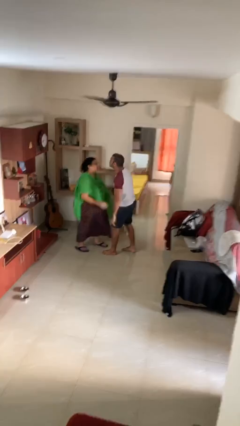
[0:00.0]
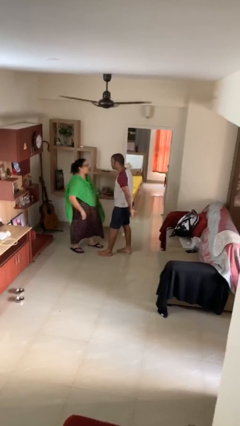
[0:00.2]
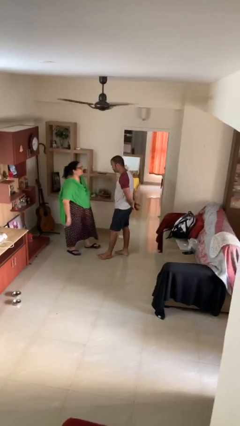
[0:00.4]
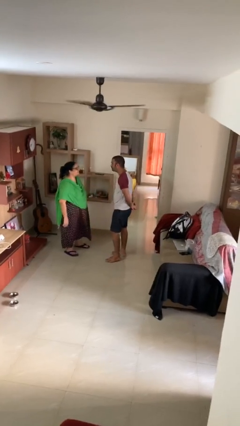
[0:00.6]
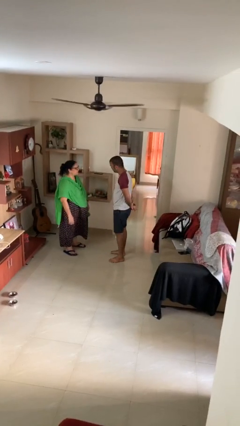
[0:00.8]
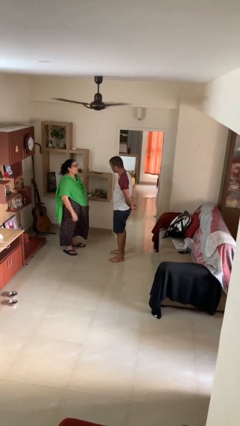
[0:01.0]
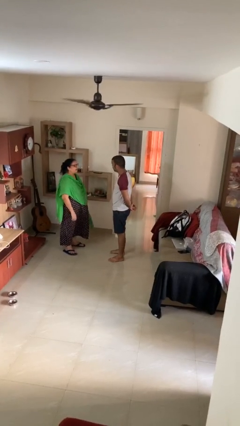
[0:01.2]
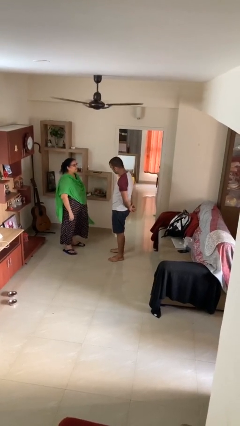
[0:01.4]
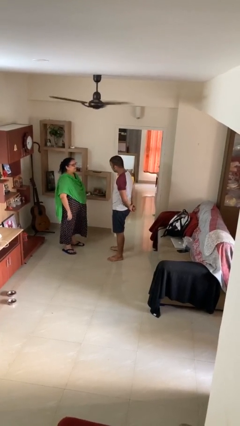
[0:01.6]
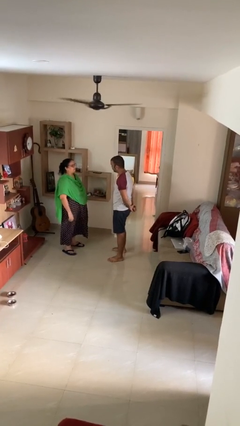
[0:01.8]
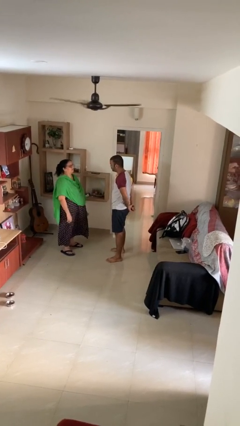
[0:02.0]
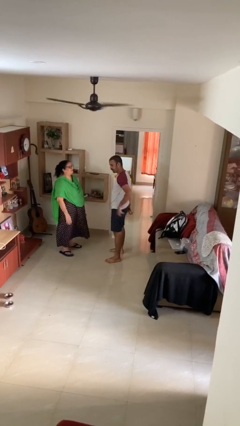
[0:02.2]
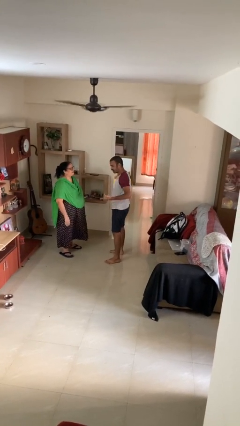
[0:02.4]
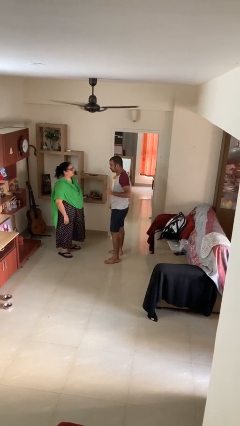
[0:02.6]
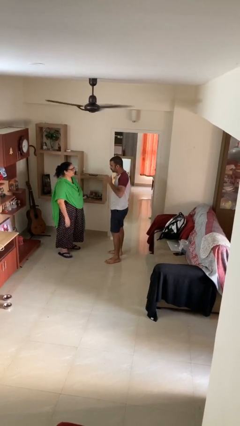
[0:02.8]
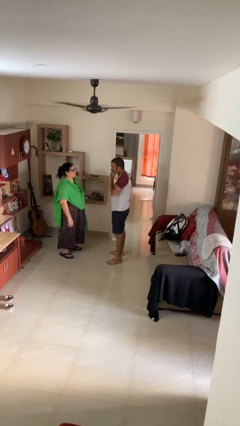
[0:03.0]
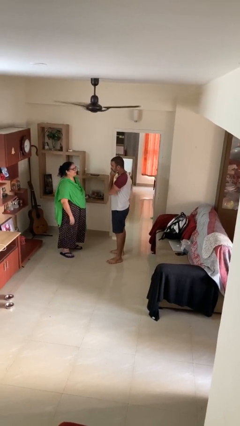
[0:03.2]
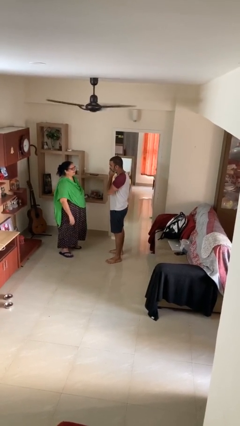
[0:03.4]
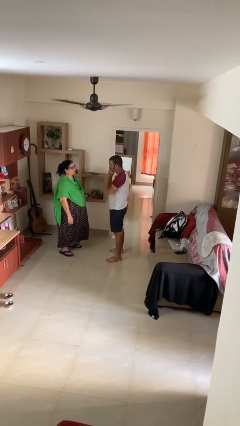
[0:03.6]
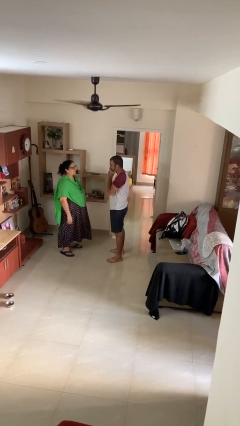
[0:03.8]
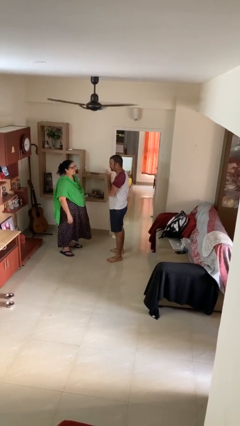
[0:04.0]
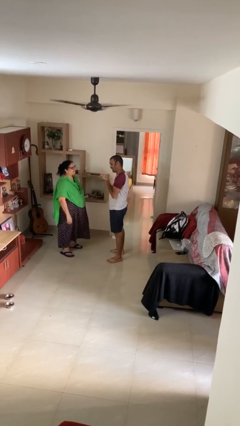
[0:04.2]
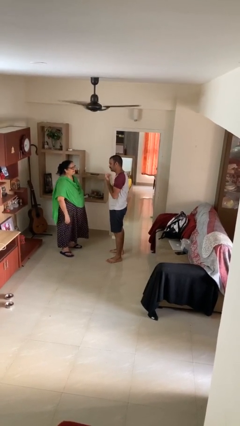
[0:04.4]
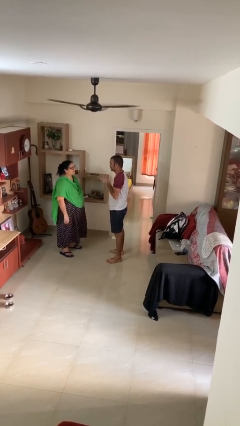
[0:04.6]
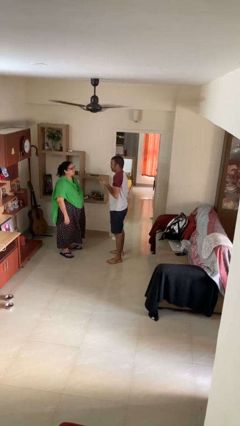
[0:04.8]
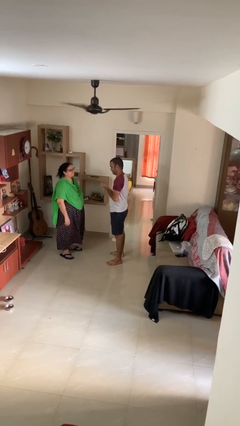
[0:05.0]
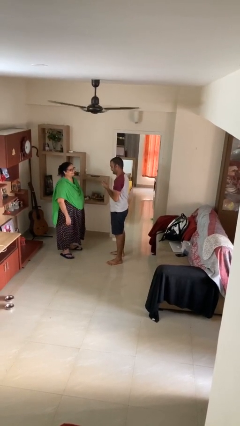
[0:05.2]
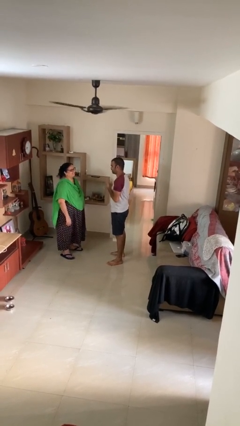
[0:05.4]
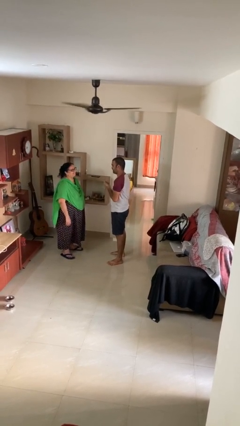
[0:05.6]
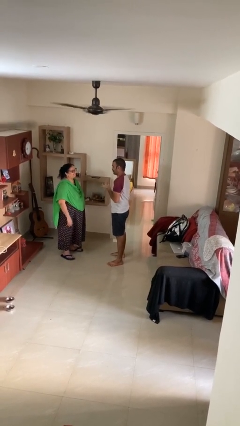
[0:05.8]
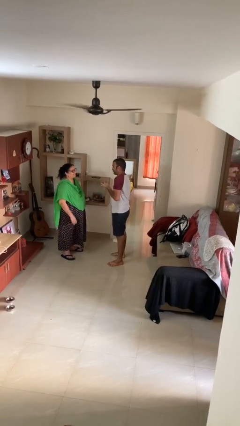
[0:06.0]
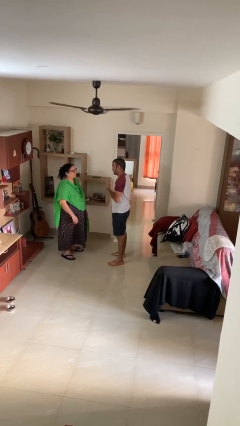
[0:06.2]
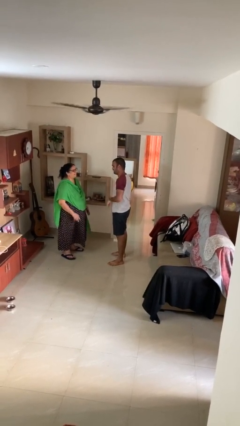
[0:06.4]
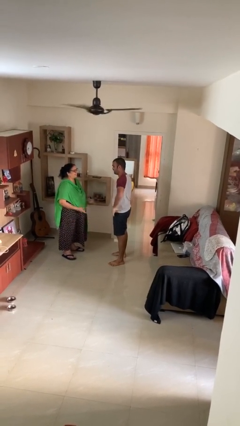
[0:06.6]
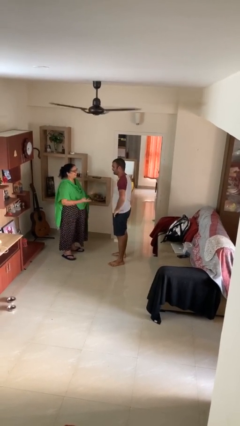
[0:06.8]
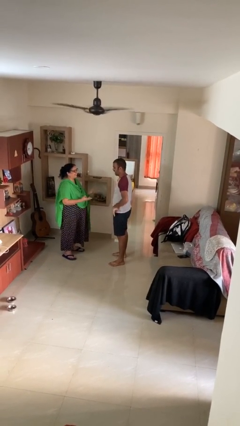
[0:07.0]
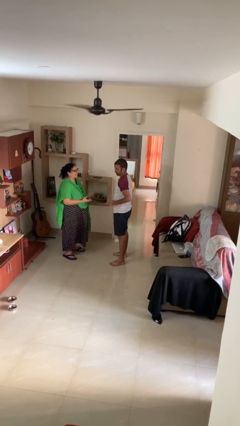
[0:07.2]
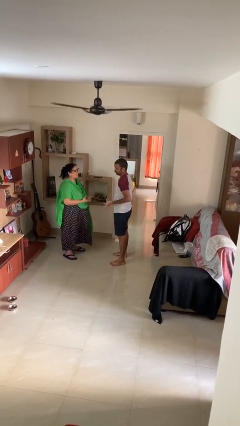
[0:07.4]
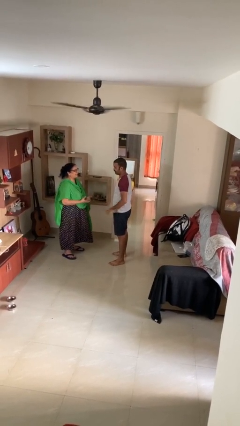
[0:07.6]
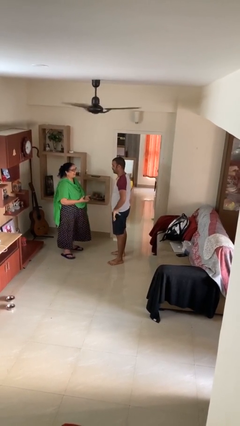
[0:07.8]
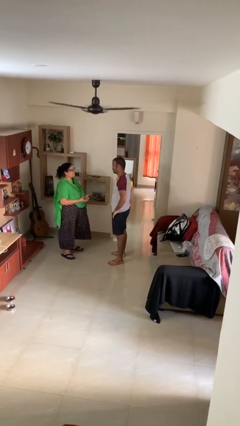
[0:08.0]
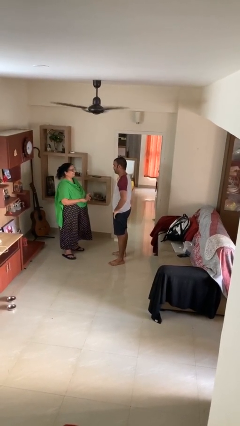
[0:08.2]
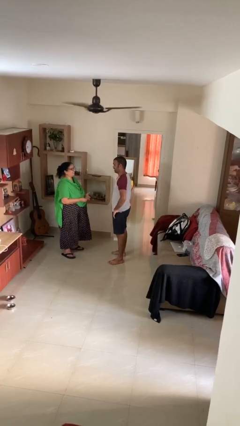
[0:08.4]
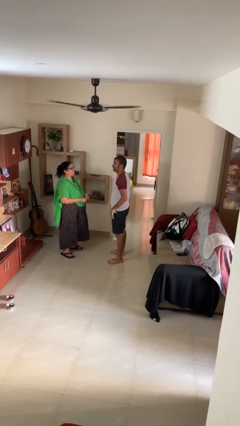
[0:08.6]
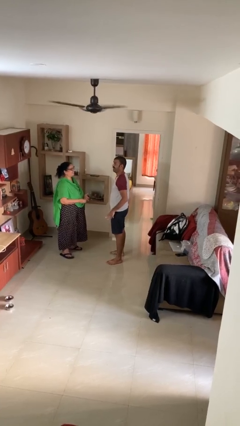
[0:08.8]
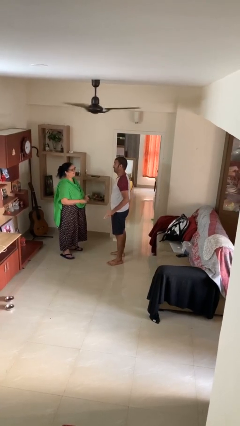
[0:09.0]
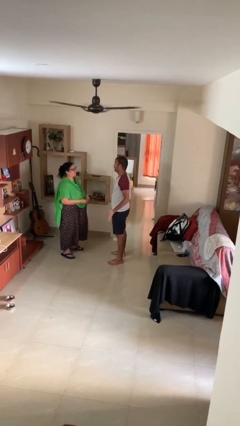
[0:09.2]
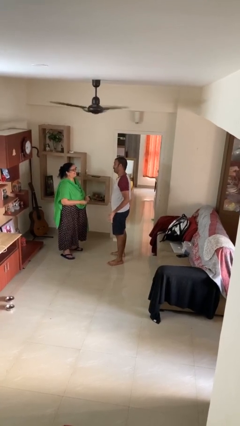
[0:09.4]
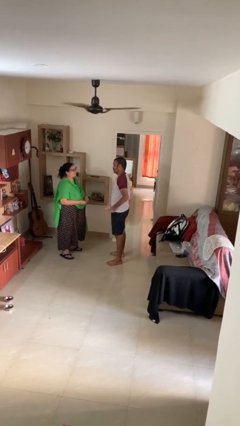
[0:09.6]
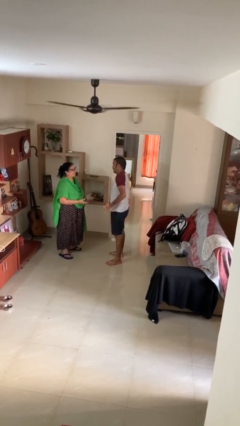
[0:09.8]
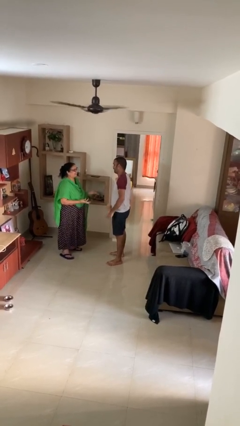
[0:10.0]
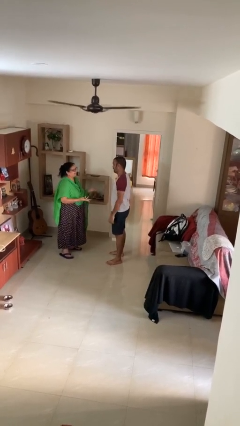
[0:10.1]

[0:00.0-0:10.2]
person talks to person

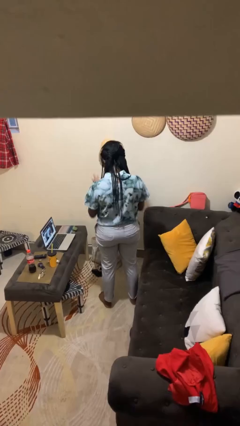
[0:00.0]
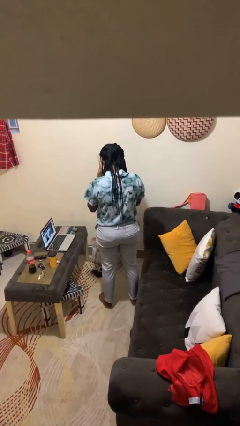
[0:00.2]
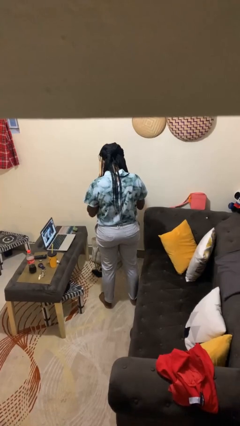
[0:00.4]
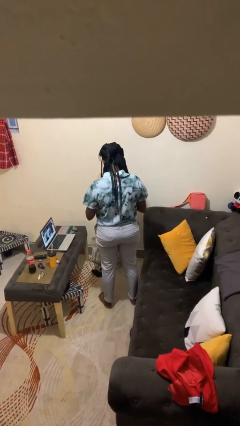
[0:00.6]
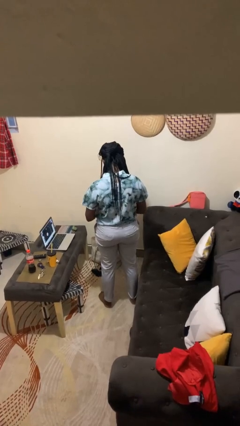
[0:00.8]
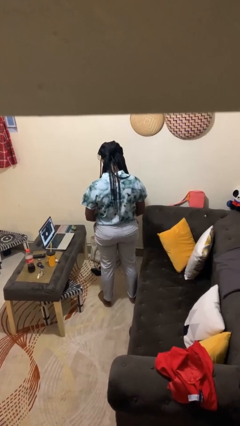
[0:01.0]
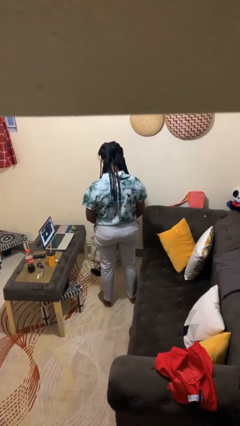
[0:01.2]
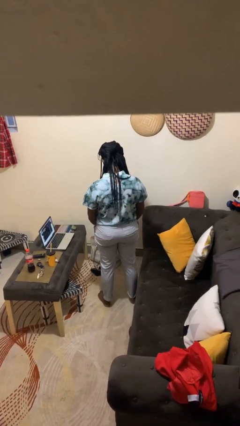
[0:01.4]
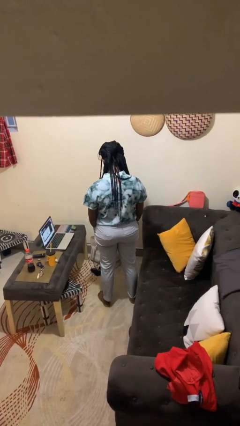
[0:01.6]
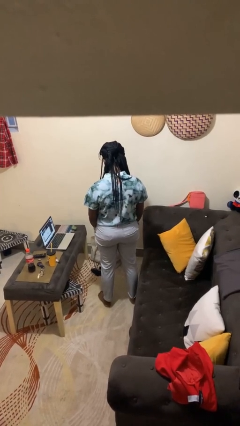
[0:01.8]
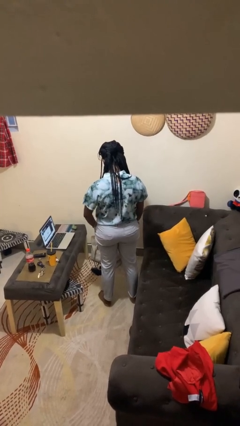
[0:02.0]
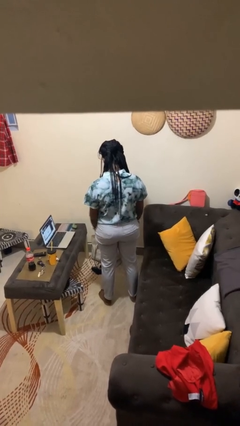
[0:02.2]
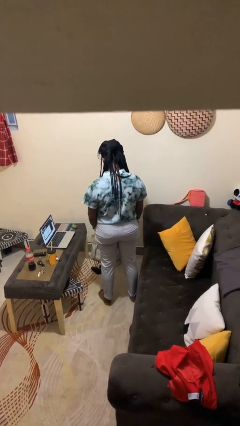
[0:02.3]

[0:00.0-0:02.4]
person takes off hat

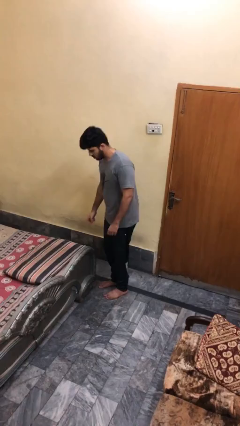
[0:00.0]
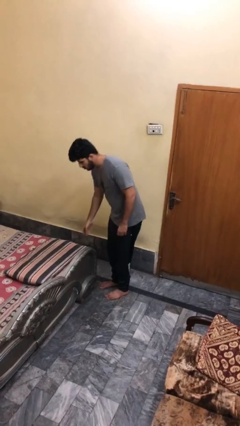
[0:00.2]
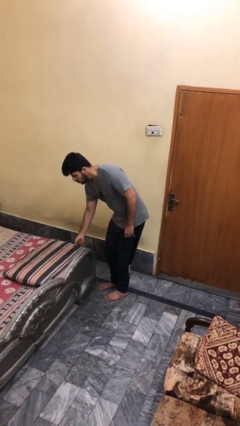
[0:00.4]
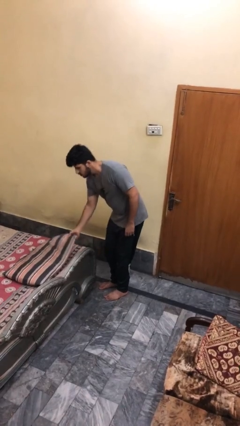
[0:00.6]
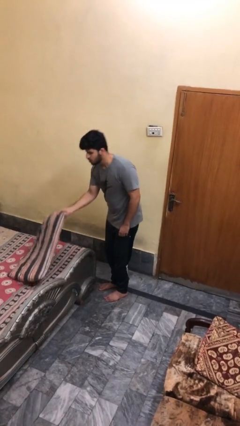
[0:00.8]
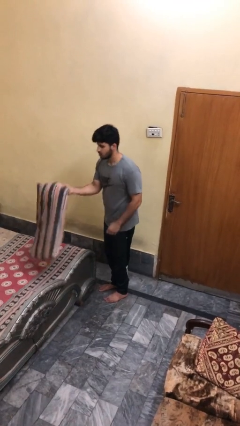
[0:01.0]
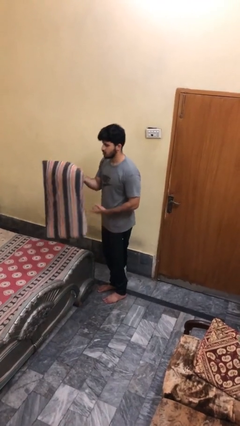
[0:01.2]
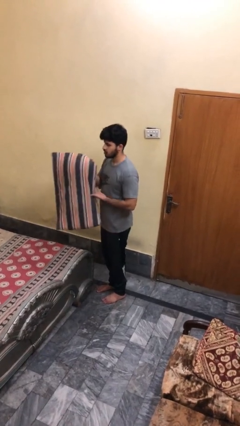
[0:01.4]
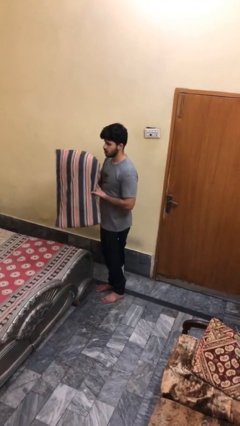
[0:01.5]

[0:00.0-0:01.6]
person picks up object from bed

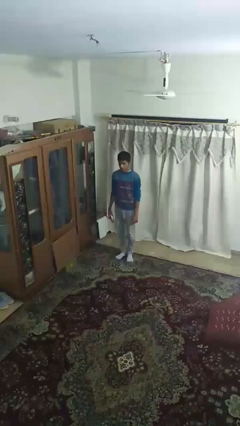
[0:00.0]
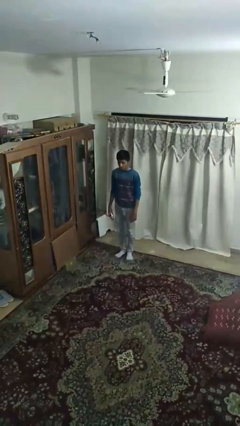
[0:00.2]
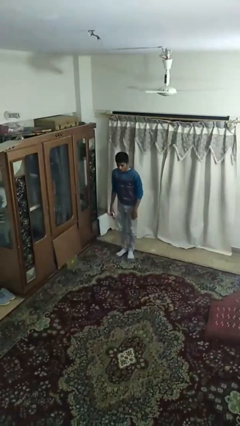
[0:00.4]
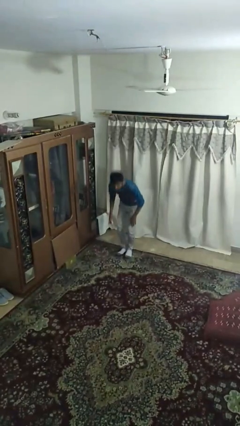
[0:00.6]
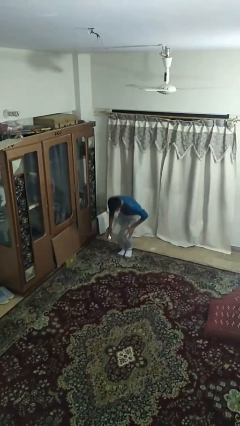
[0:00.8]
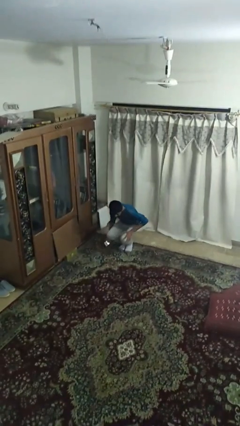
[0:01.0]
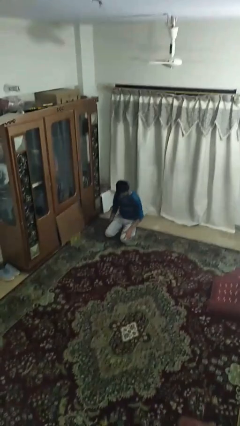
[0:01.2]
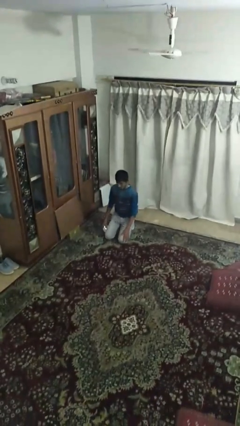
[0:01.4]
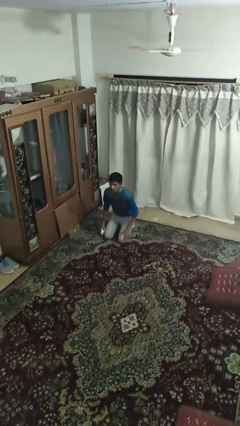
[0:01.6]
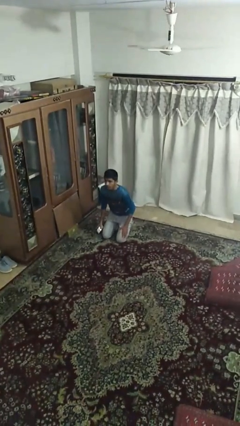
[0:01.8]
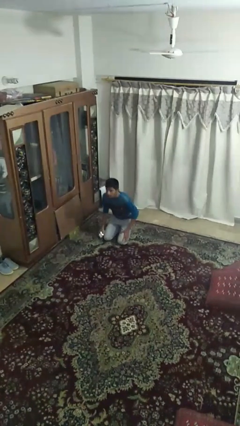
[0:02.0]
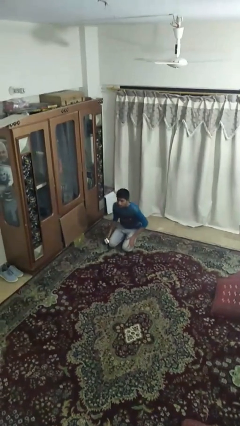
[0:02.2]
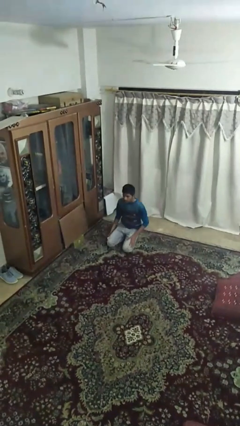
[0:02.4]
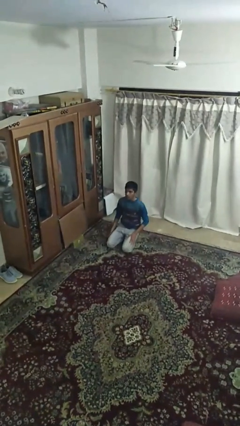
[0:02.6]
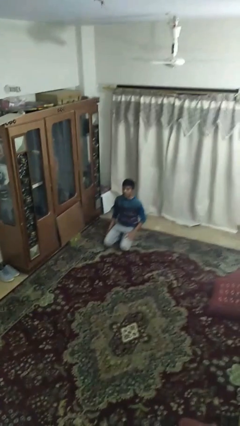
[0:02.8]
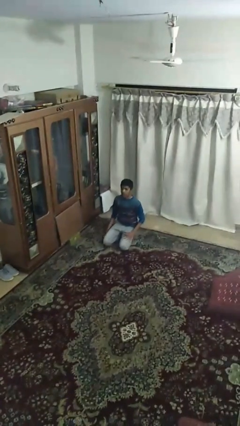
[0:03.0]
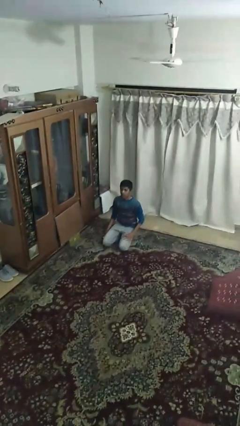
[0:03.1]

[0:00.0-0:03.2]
person sits down

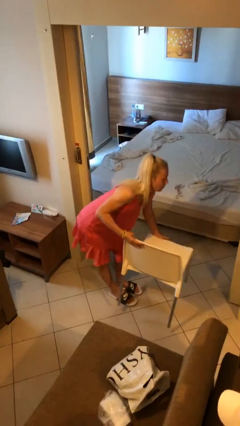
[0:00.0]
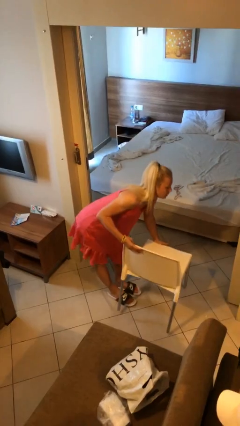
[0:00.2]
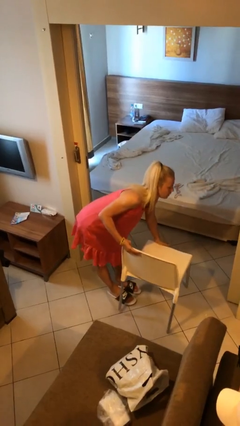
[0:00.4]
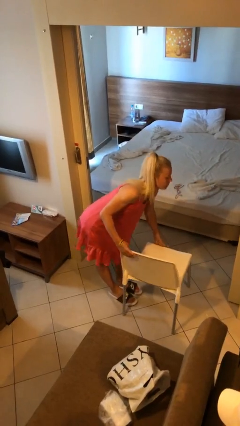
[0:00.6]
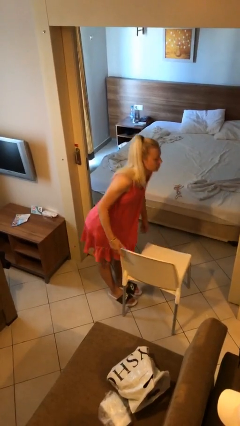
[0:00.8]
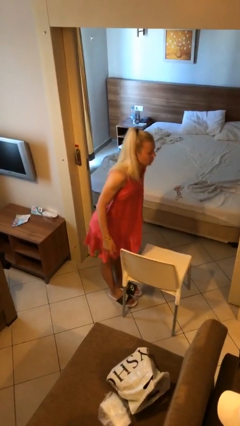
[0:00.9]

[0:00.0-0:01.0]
person puts down object on floor
